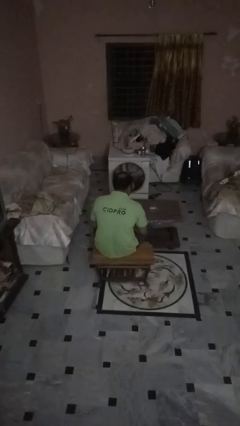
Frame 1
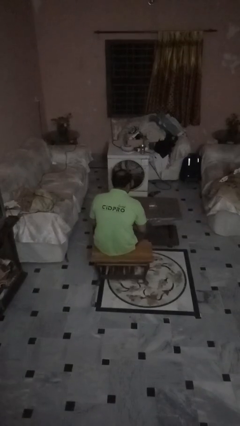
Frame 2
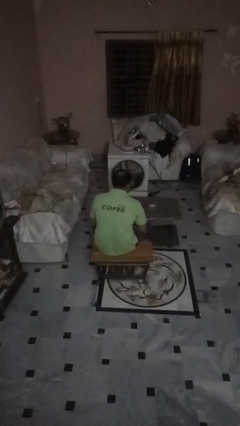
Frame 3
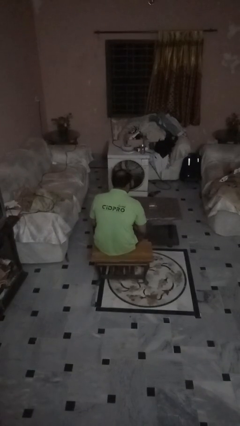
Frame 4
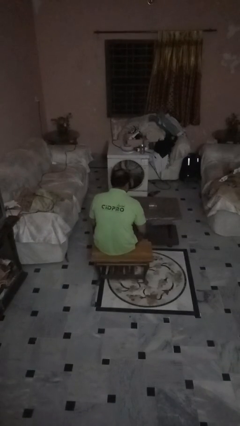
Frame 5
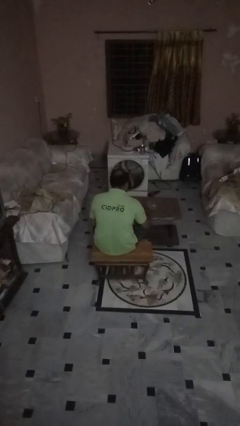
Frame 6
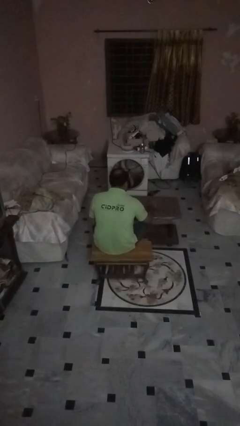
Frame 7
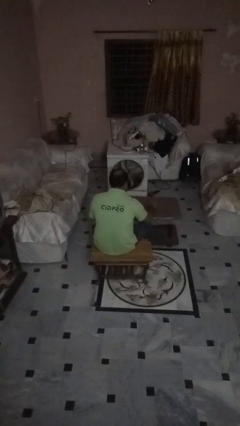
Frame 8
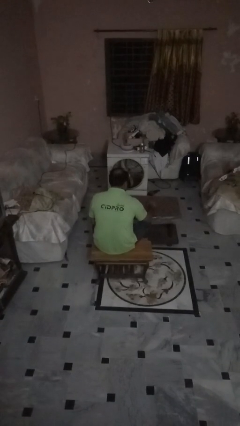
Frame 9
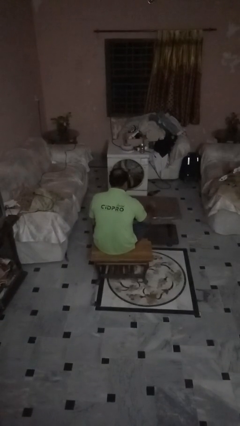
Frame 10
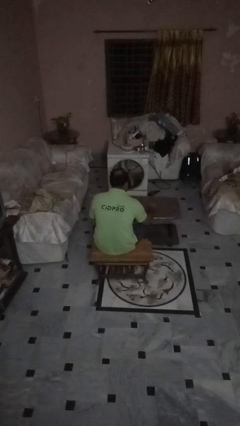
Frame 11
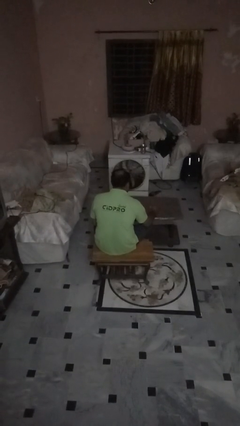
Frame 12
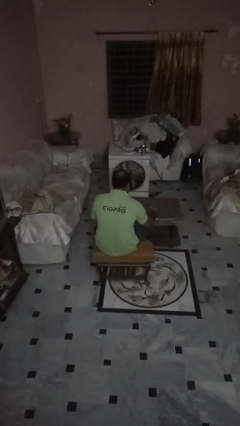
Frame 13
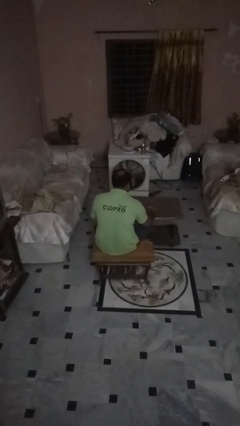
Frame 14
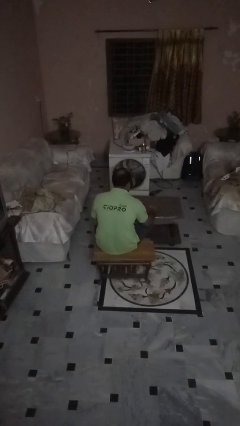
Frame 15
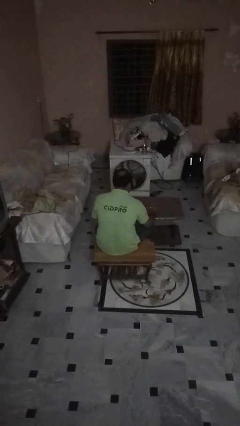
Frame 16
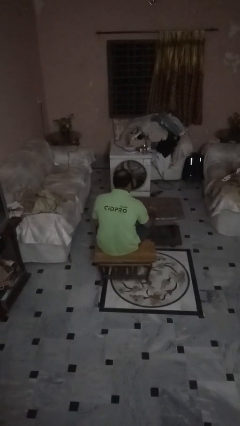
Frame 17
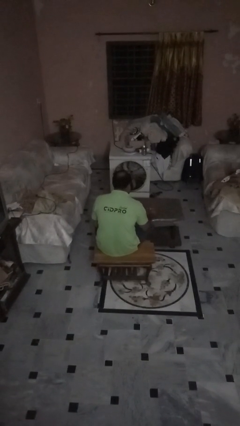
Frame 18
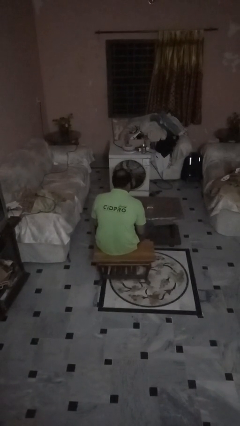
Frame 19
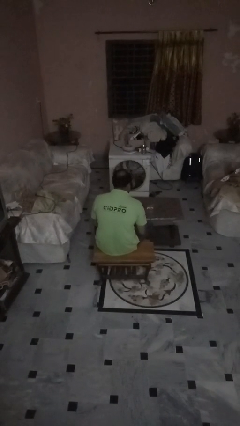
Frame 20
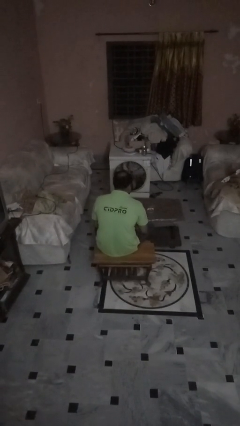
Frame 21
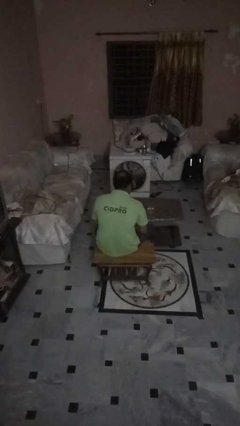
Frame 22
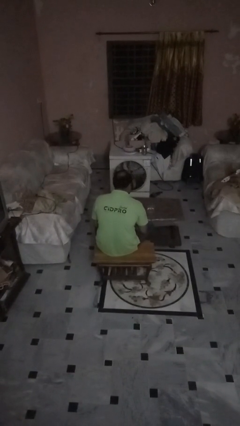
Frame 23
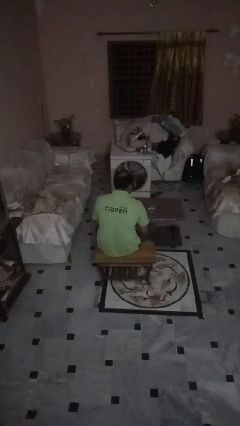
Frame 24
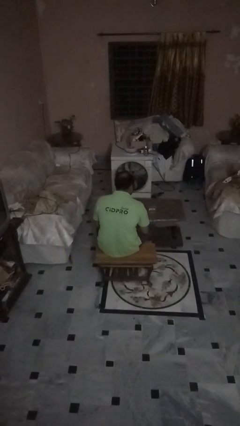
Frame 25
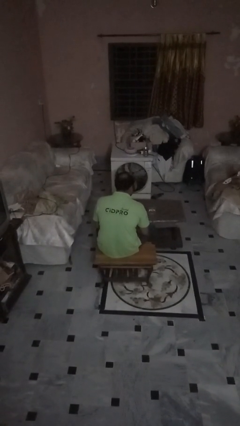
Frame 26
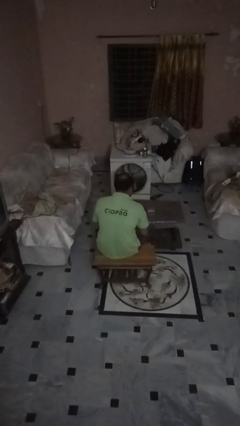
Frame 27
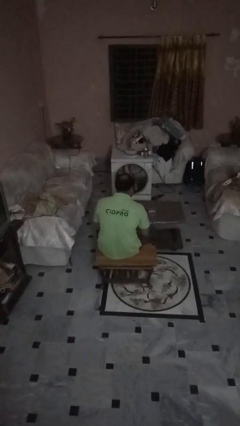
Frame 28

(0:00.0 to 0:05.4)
person sets upright glass

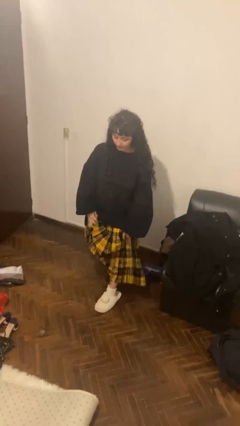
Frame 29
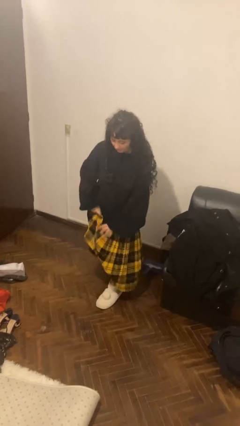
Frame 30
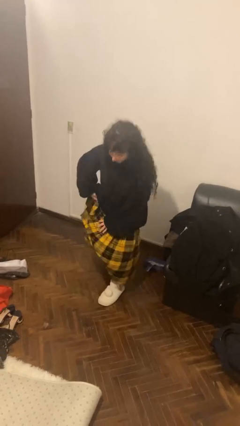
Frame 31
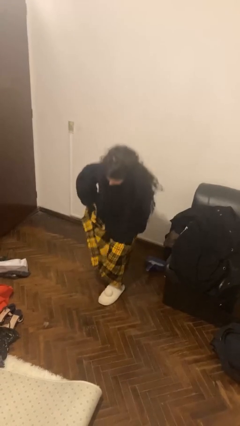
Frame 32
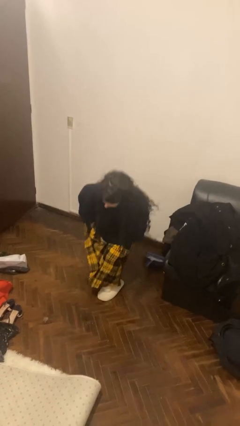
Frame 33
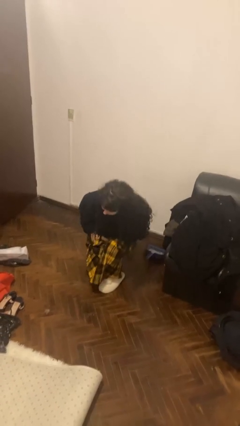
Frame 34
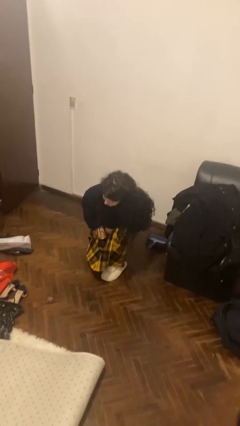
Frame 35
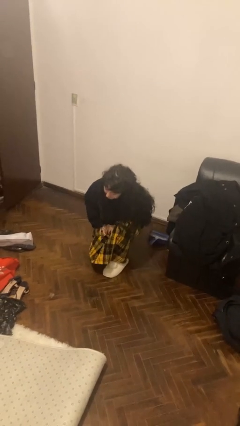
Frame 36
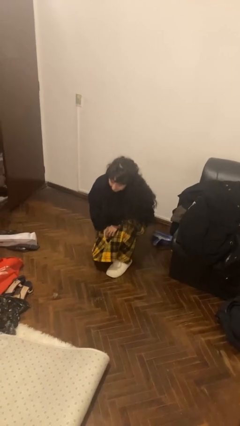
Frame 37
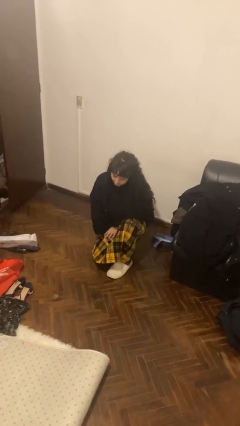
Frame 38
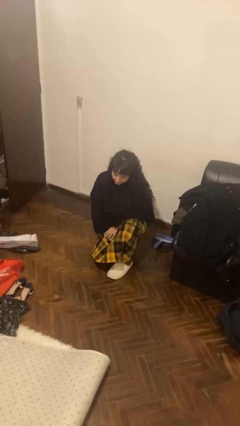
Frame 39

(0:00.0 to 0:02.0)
person kneels

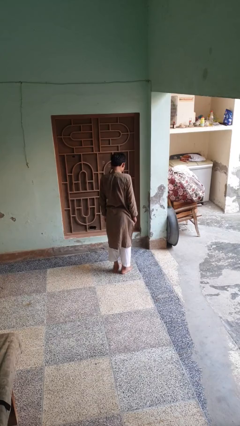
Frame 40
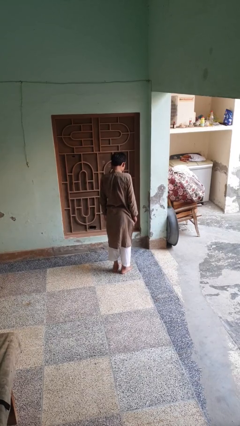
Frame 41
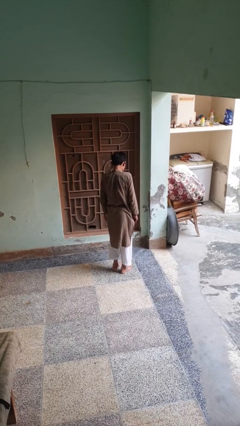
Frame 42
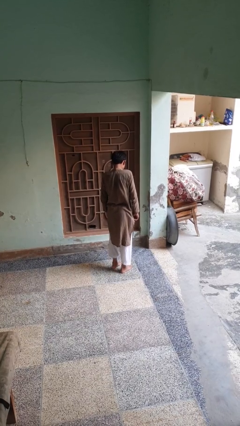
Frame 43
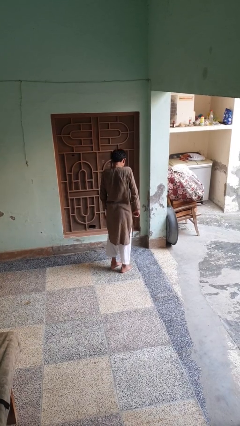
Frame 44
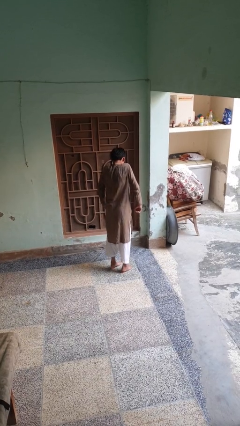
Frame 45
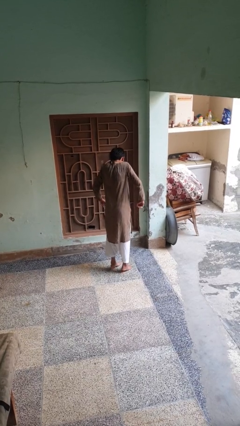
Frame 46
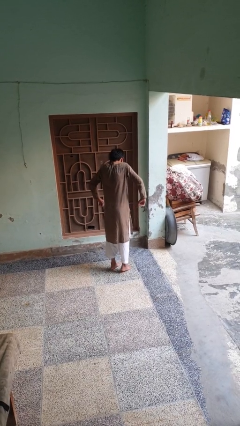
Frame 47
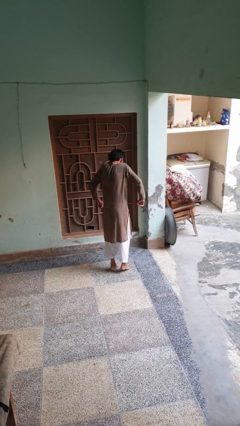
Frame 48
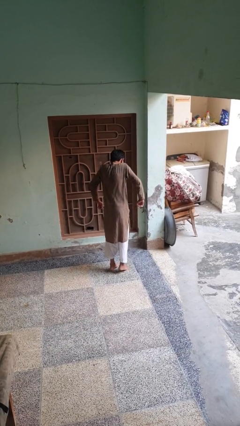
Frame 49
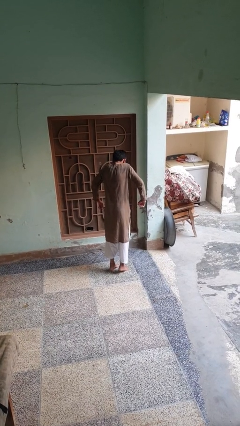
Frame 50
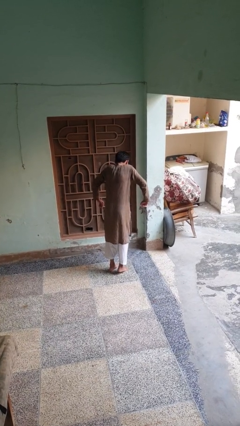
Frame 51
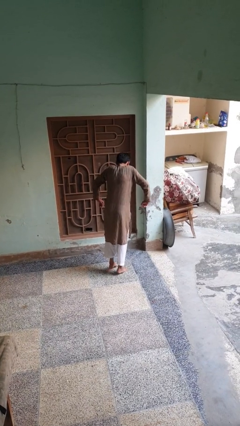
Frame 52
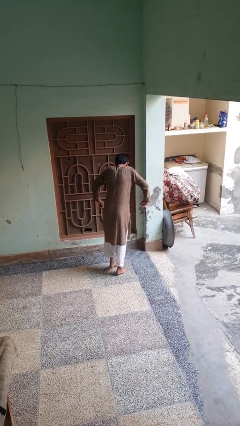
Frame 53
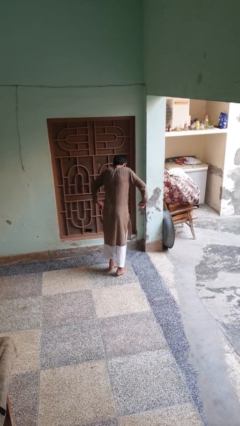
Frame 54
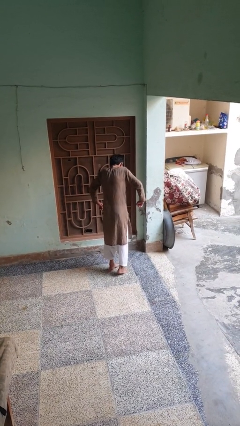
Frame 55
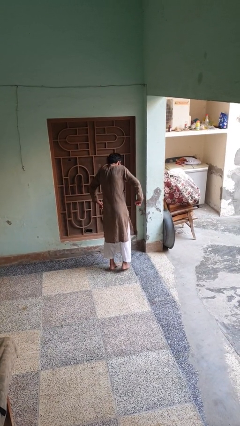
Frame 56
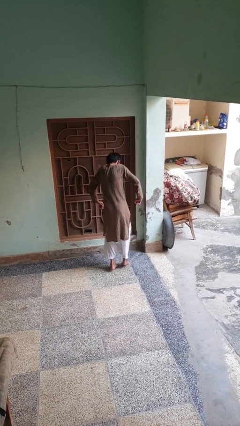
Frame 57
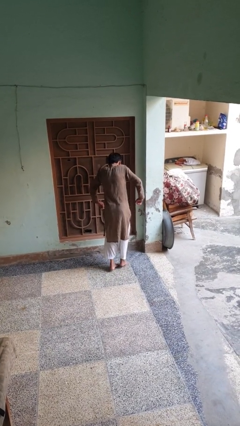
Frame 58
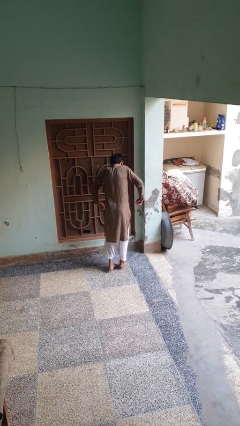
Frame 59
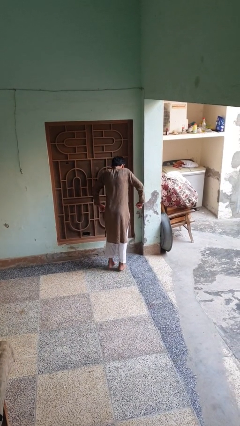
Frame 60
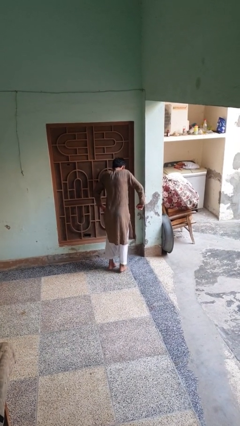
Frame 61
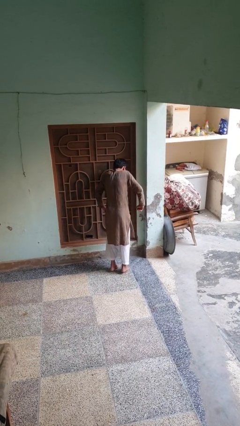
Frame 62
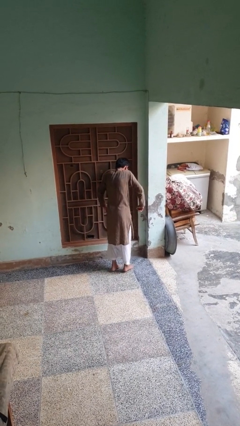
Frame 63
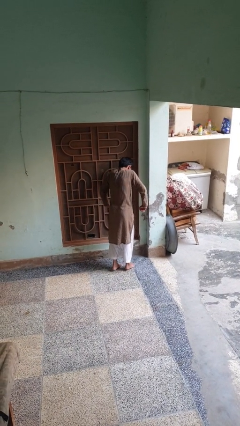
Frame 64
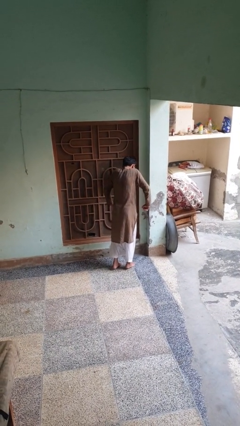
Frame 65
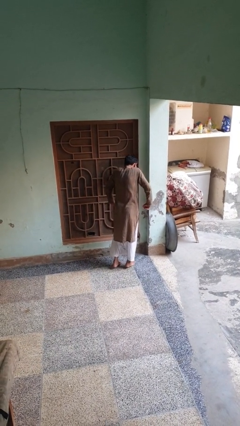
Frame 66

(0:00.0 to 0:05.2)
person walks tiptoe

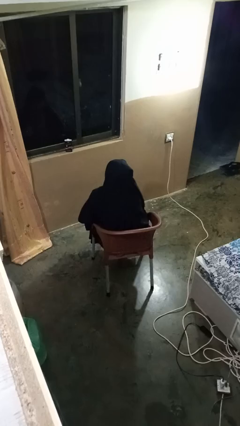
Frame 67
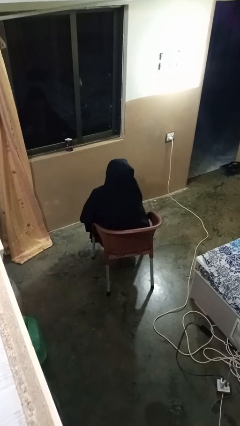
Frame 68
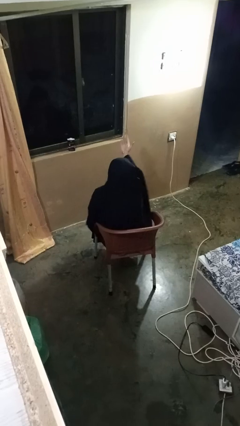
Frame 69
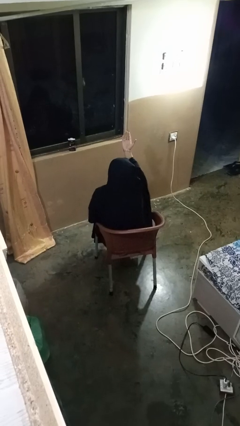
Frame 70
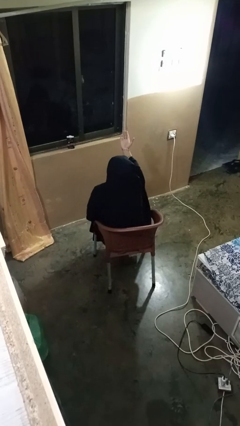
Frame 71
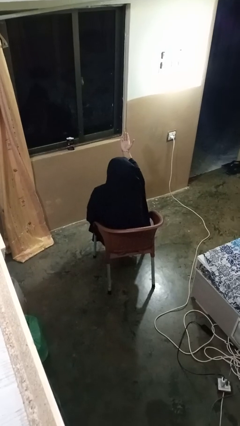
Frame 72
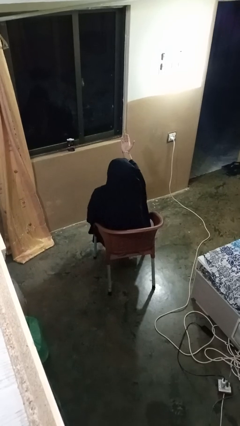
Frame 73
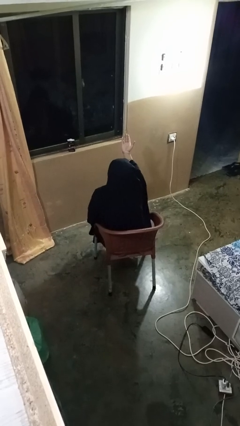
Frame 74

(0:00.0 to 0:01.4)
person gestures swipe up

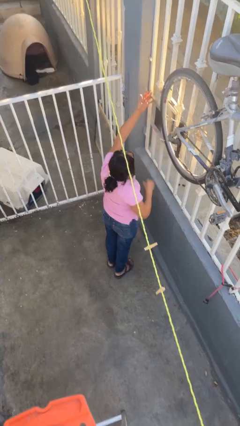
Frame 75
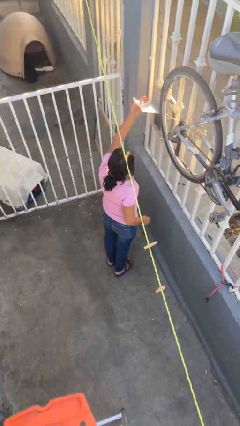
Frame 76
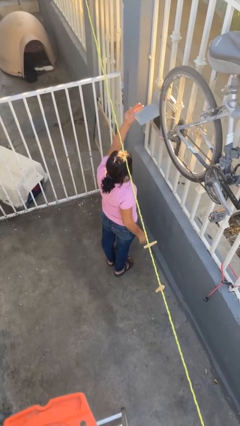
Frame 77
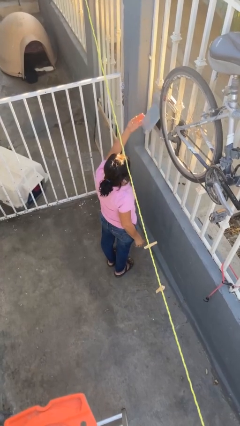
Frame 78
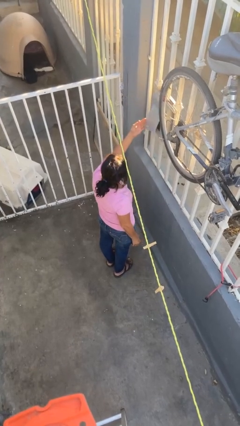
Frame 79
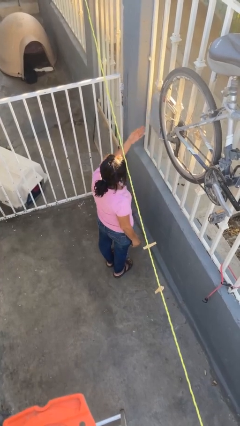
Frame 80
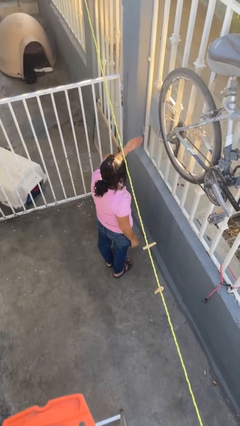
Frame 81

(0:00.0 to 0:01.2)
person closes mailbox

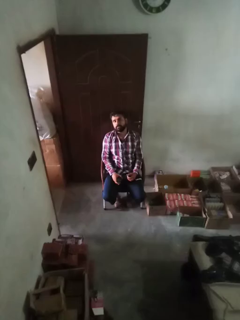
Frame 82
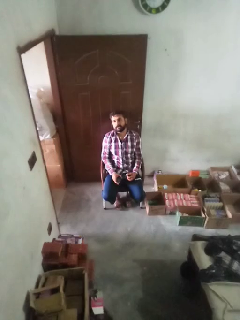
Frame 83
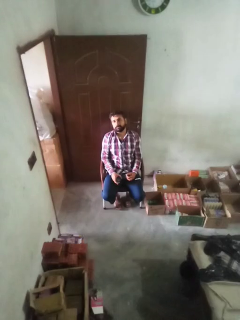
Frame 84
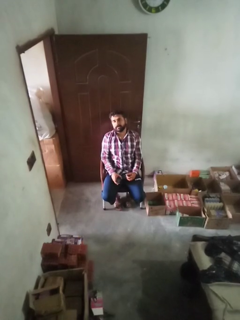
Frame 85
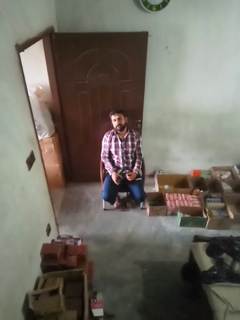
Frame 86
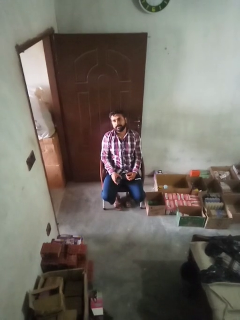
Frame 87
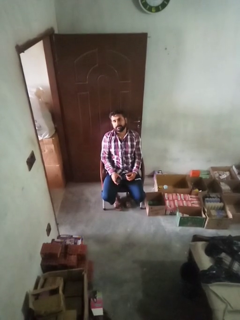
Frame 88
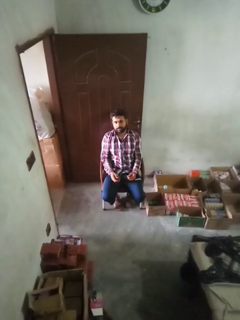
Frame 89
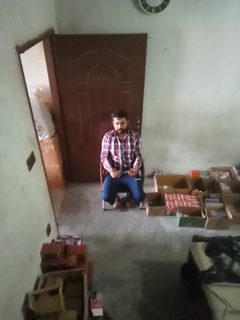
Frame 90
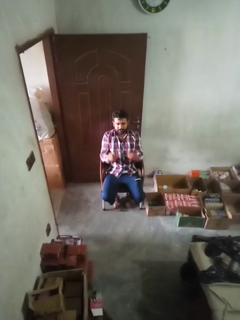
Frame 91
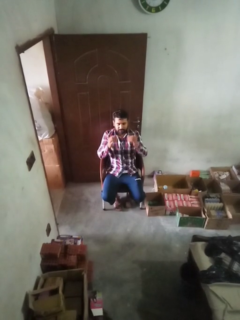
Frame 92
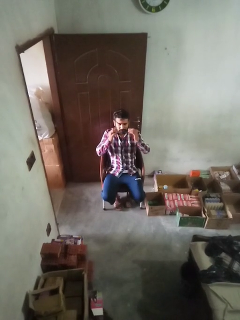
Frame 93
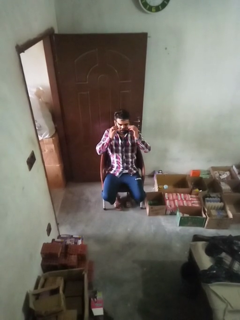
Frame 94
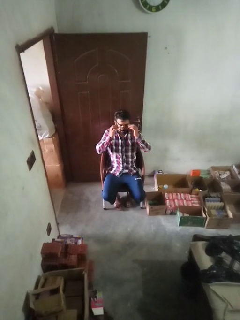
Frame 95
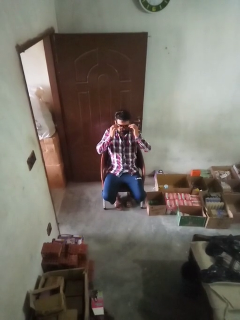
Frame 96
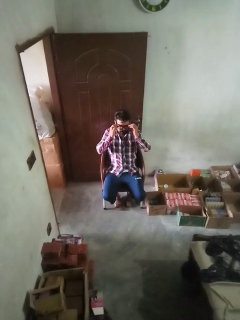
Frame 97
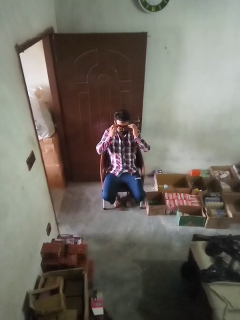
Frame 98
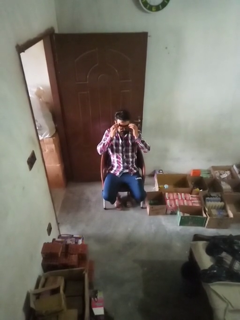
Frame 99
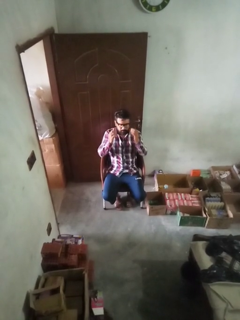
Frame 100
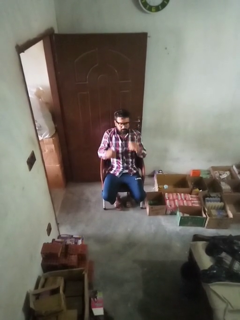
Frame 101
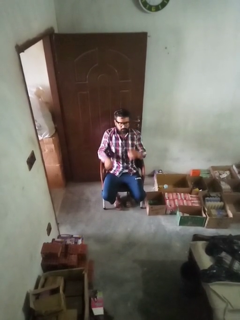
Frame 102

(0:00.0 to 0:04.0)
person puts on glasses
